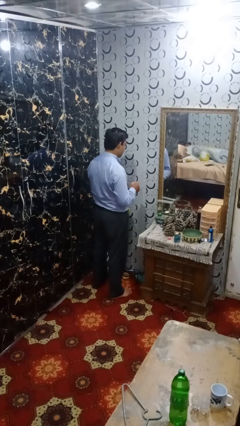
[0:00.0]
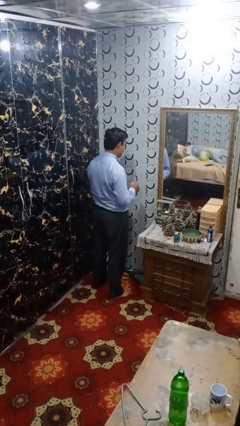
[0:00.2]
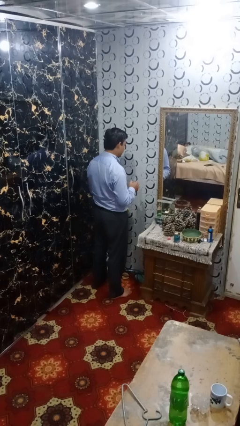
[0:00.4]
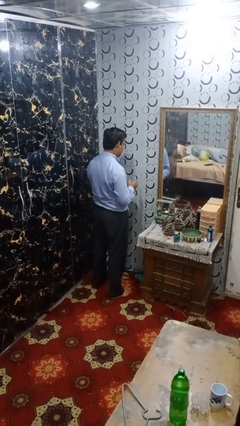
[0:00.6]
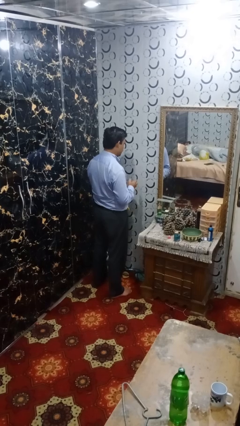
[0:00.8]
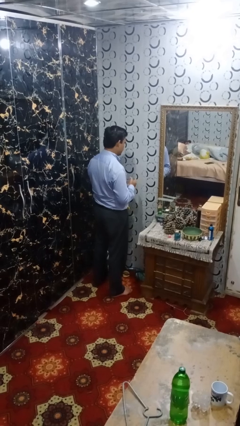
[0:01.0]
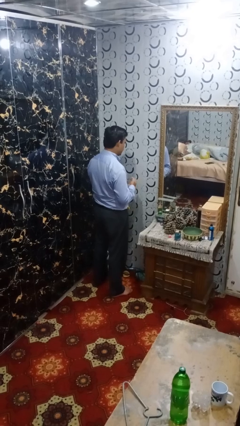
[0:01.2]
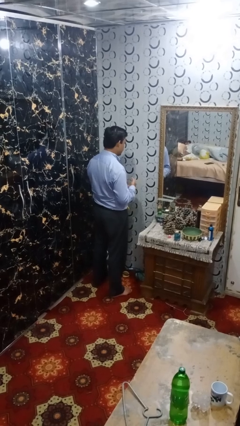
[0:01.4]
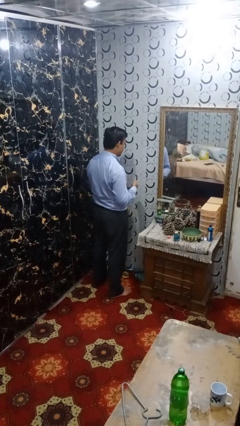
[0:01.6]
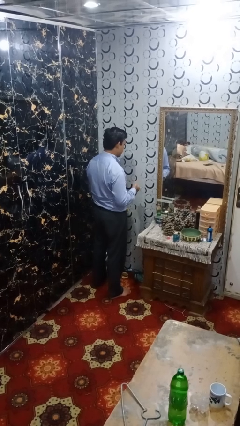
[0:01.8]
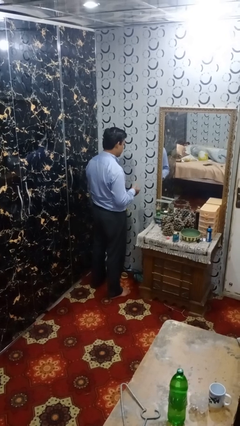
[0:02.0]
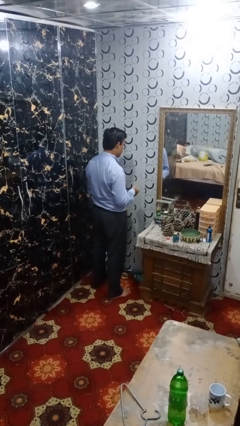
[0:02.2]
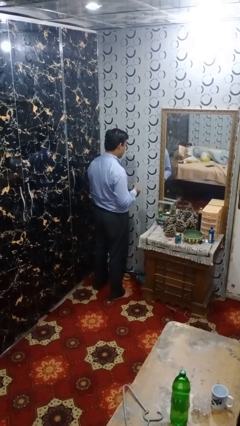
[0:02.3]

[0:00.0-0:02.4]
person takes off ring

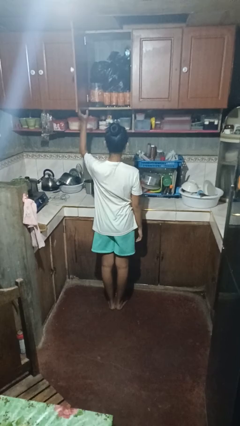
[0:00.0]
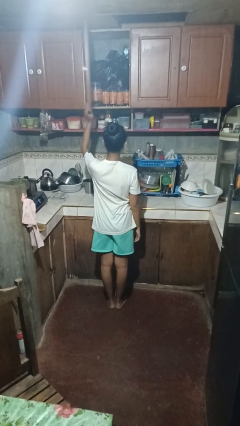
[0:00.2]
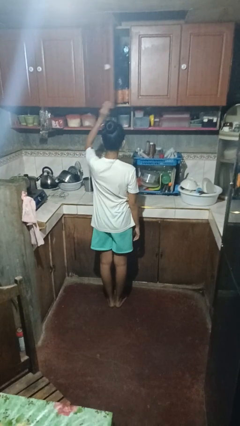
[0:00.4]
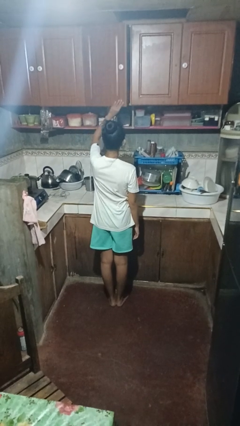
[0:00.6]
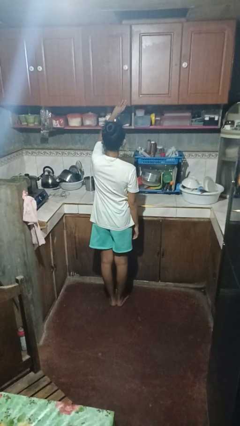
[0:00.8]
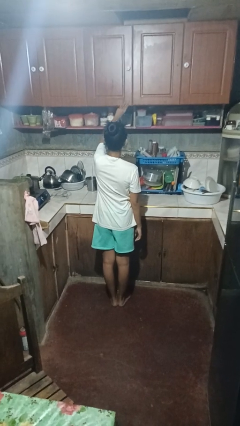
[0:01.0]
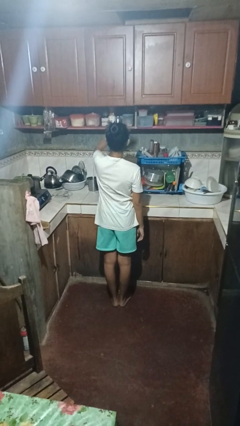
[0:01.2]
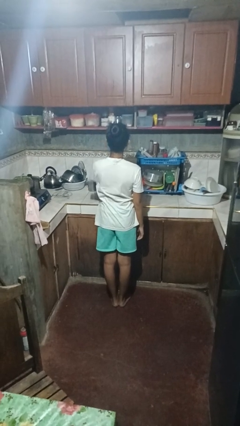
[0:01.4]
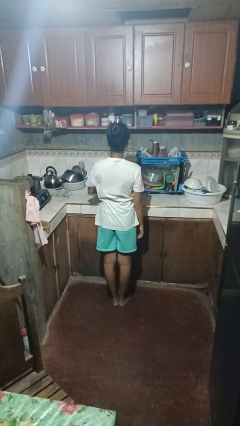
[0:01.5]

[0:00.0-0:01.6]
person closes cabinet

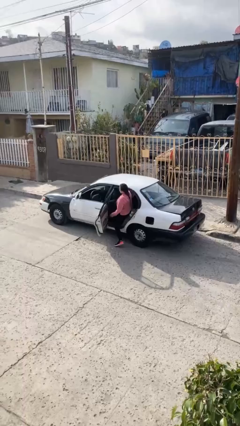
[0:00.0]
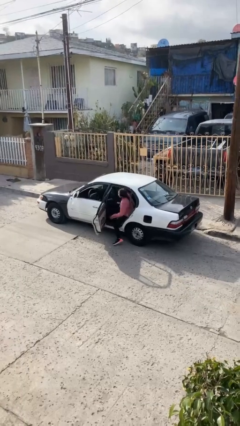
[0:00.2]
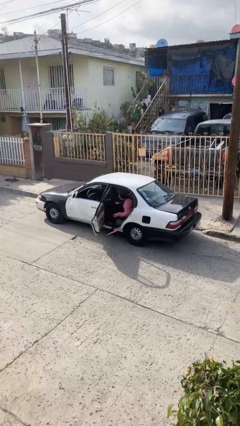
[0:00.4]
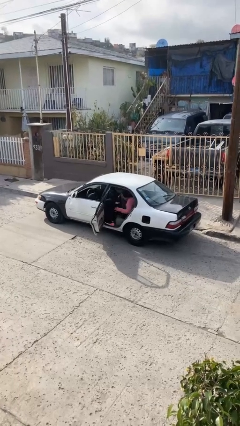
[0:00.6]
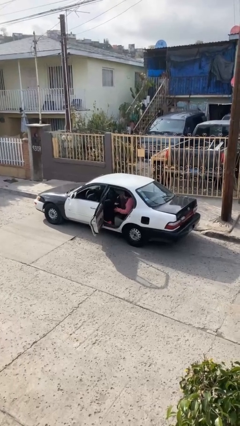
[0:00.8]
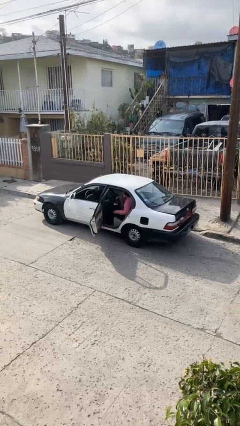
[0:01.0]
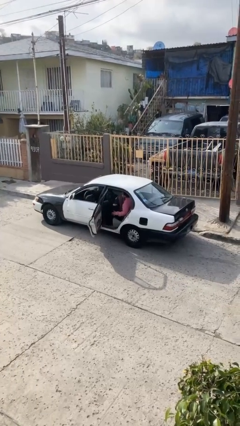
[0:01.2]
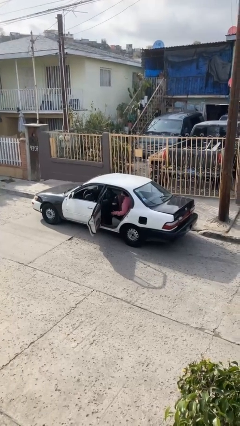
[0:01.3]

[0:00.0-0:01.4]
person enters car

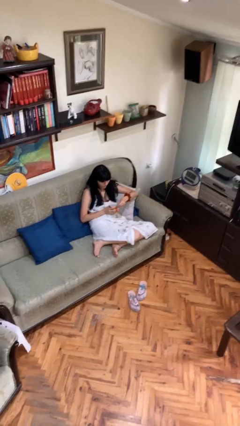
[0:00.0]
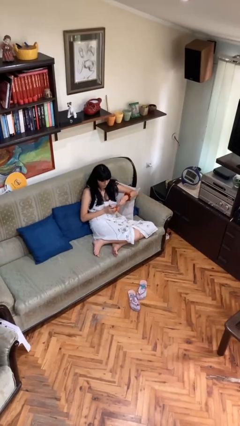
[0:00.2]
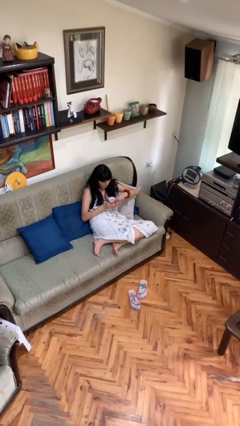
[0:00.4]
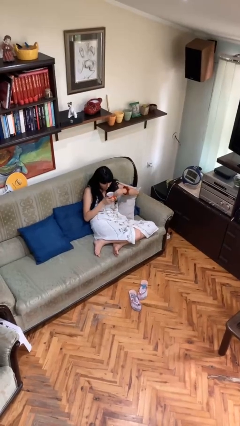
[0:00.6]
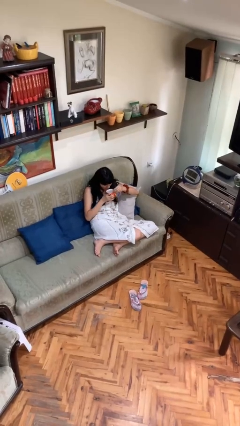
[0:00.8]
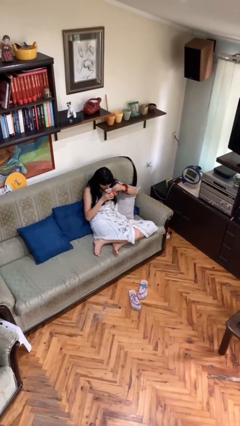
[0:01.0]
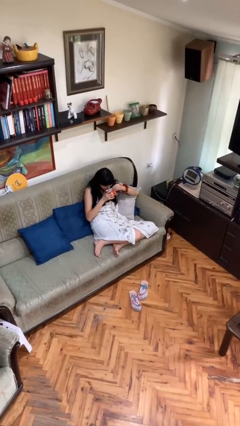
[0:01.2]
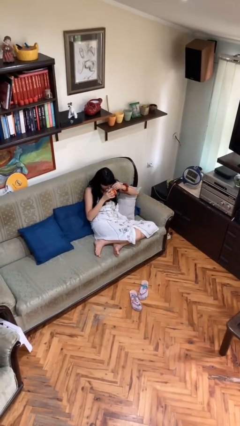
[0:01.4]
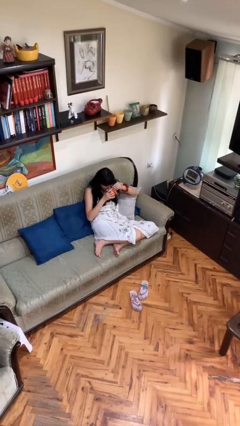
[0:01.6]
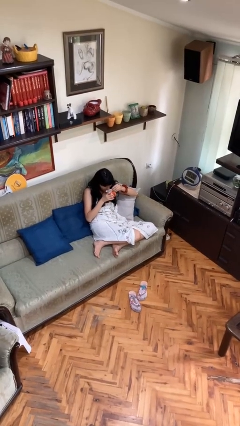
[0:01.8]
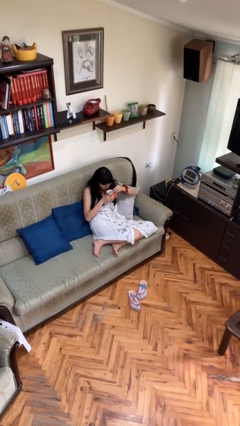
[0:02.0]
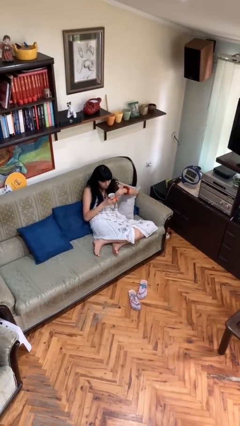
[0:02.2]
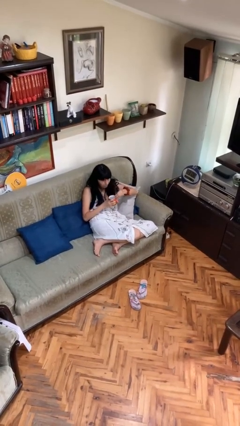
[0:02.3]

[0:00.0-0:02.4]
person drinks from mug

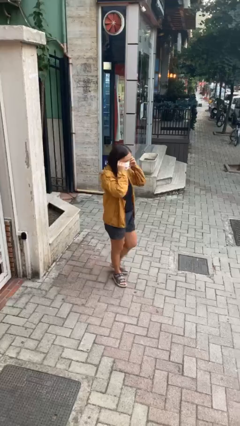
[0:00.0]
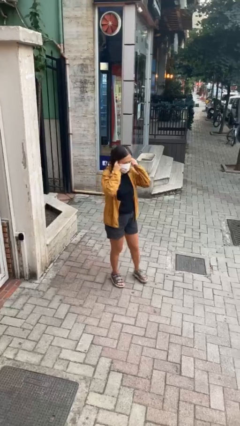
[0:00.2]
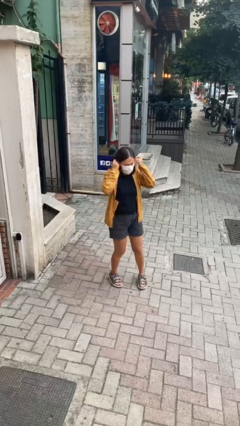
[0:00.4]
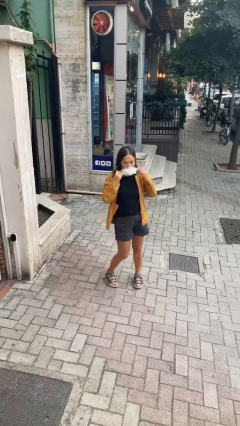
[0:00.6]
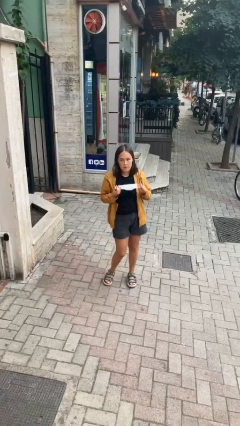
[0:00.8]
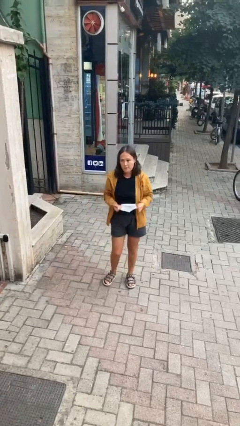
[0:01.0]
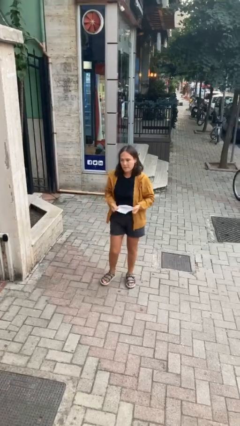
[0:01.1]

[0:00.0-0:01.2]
person takes off facemask

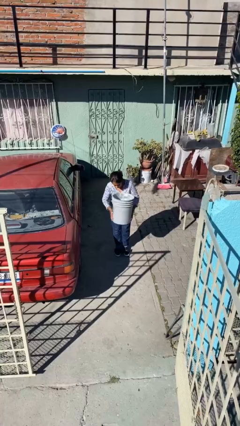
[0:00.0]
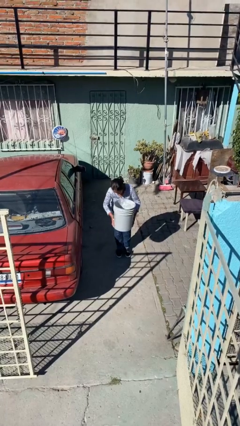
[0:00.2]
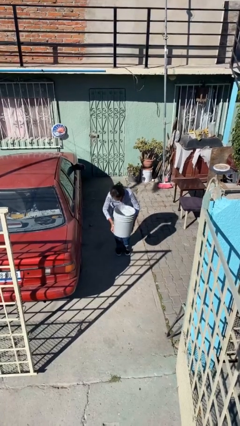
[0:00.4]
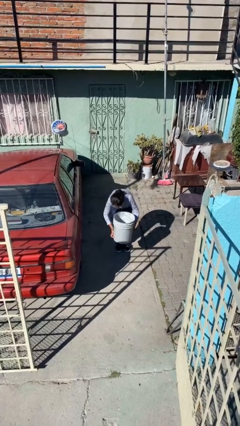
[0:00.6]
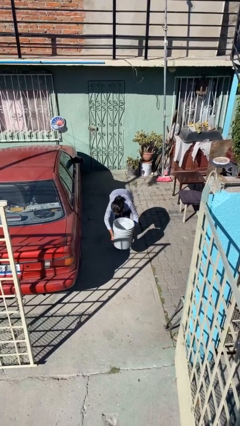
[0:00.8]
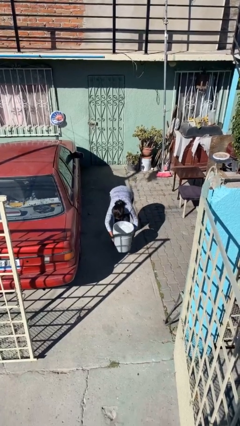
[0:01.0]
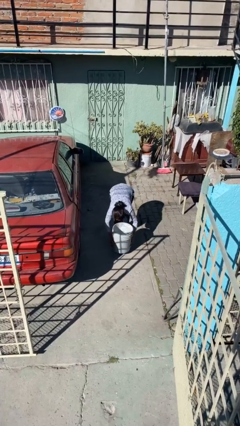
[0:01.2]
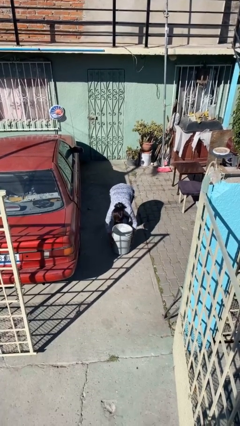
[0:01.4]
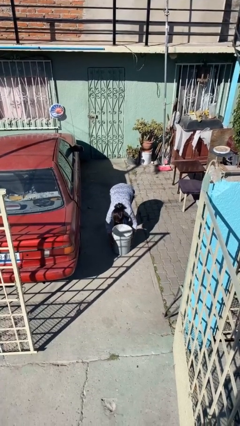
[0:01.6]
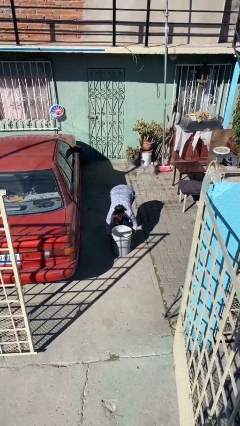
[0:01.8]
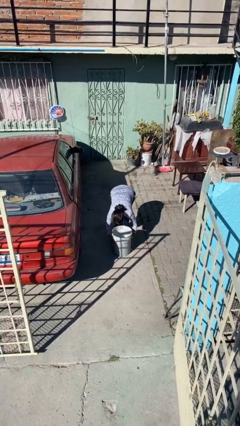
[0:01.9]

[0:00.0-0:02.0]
person puts down object on floor

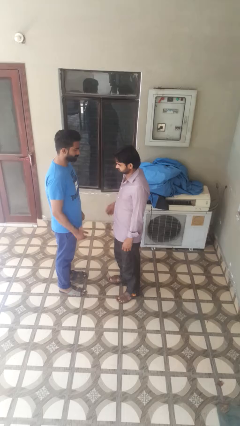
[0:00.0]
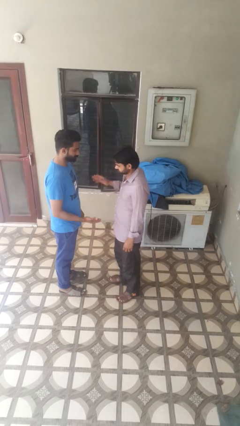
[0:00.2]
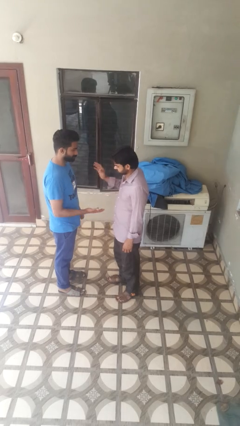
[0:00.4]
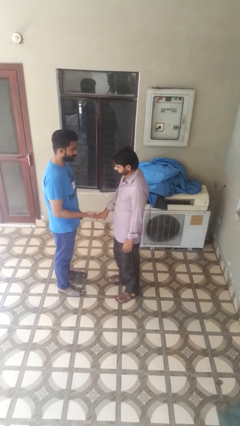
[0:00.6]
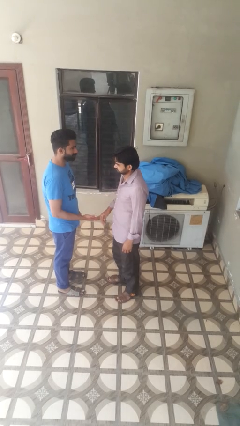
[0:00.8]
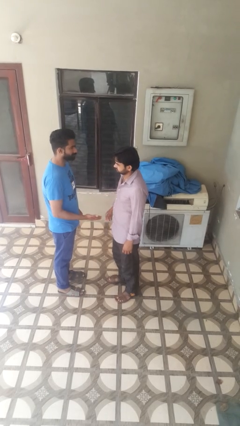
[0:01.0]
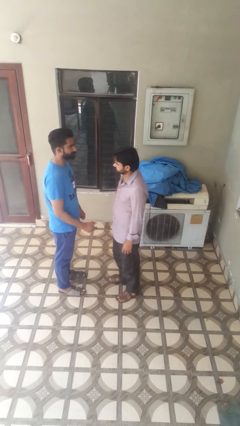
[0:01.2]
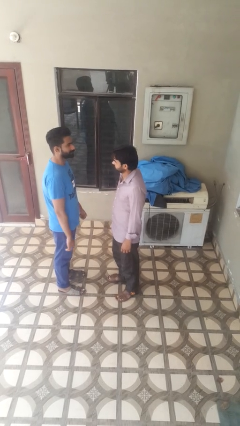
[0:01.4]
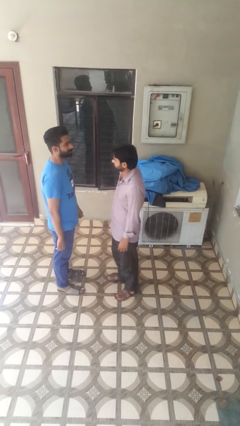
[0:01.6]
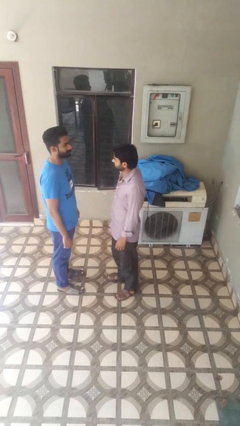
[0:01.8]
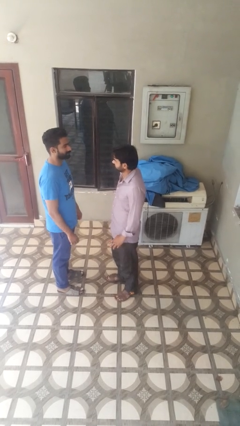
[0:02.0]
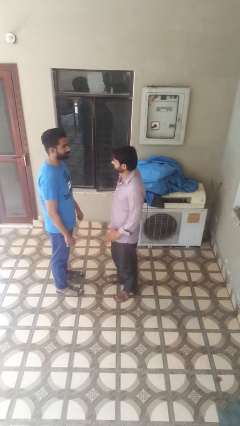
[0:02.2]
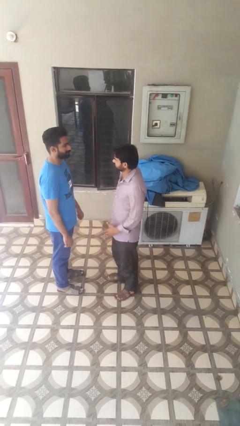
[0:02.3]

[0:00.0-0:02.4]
person highfives hand

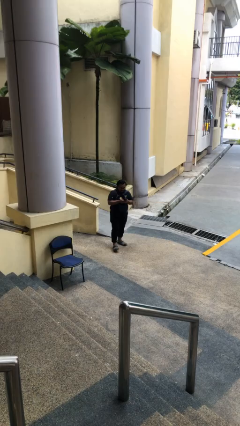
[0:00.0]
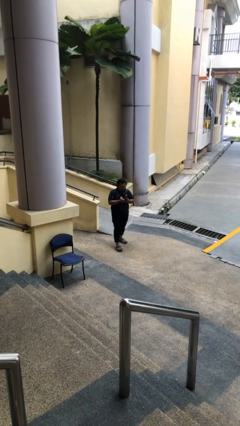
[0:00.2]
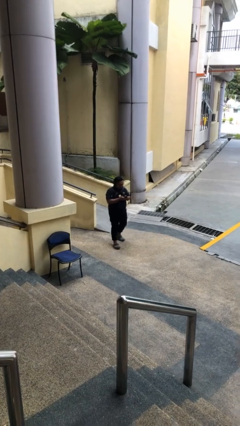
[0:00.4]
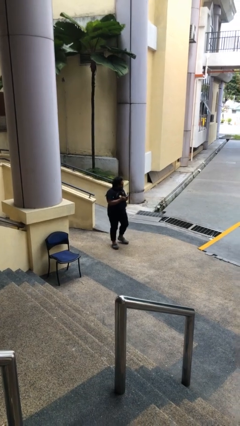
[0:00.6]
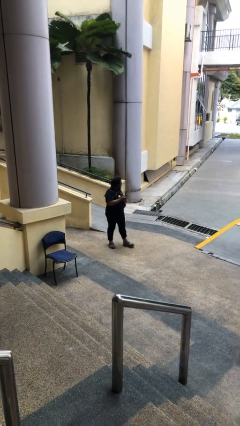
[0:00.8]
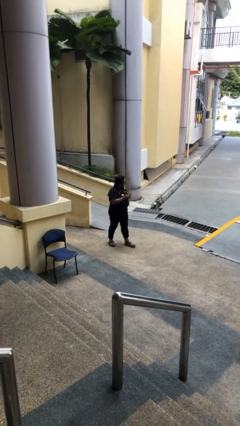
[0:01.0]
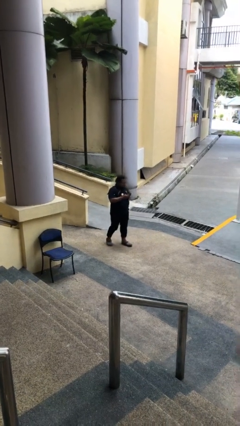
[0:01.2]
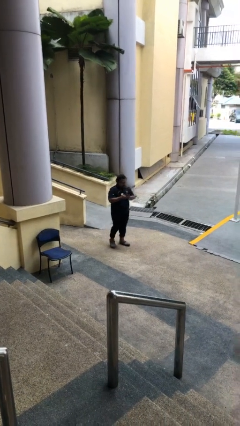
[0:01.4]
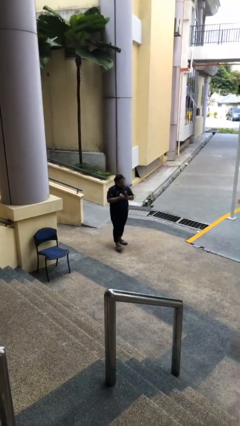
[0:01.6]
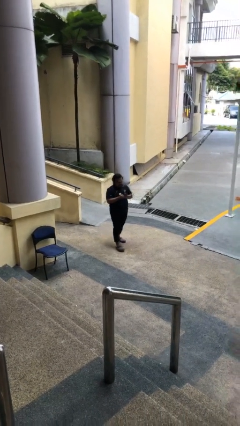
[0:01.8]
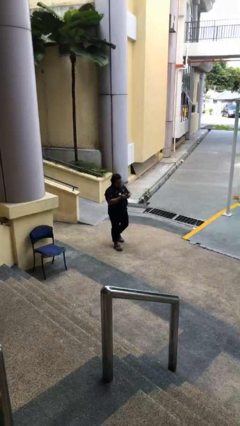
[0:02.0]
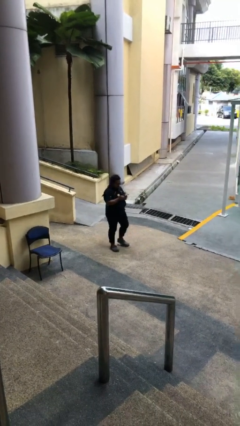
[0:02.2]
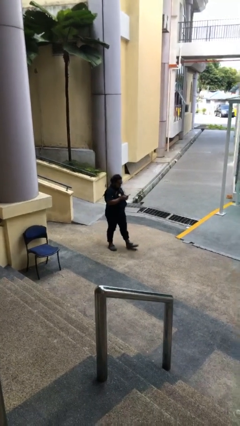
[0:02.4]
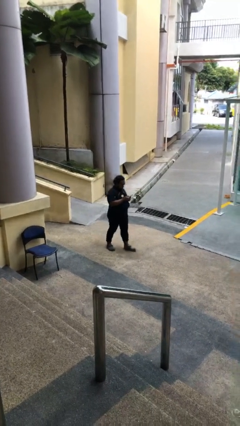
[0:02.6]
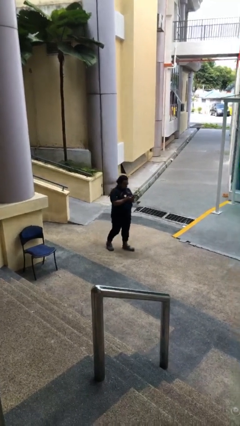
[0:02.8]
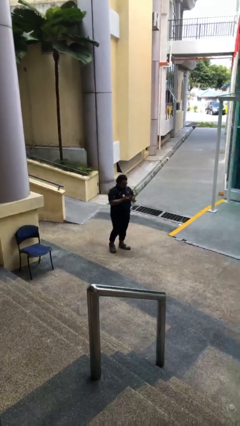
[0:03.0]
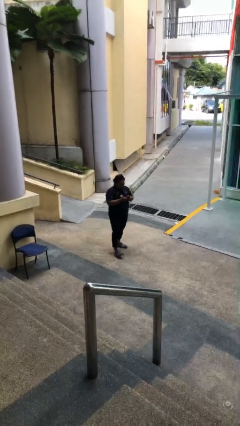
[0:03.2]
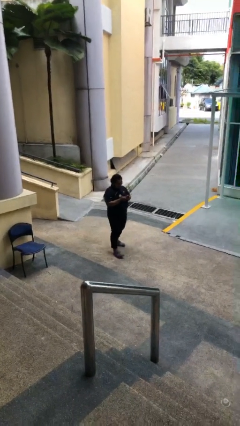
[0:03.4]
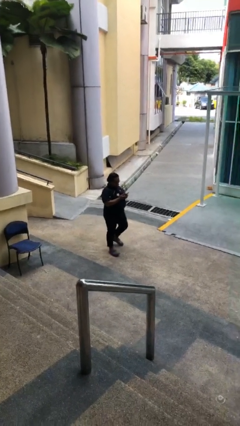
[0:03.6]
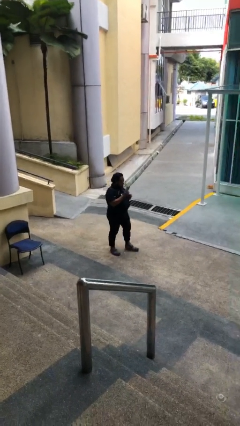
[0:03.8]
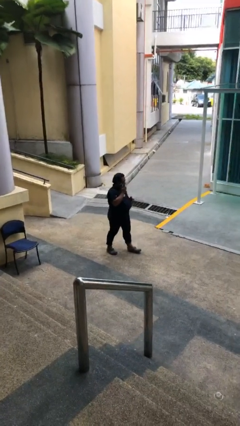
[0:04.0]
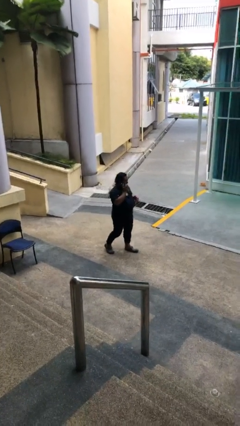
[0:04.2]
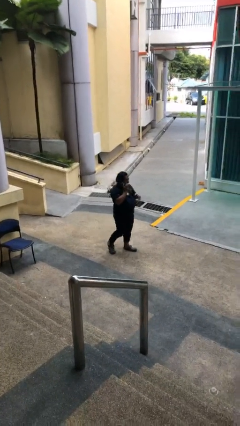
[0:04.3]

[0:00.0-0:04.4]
person texts on phone
